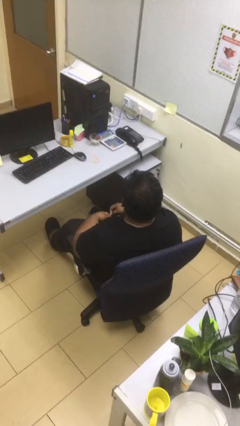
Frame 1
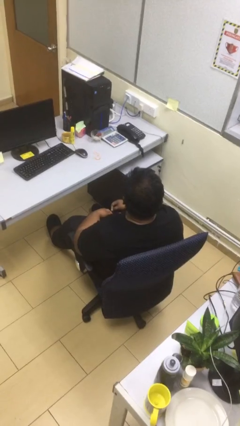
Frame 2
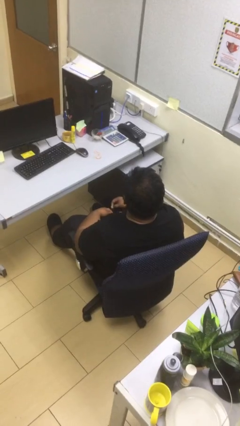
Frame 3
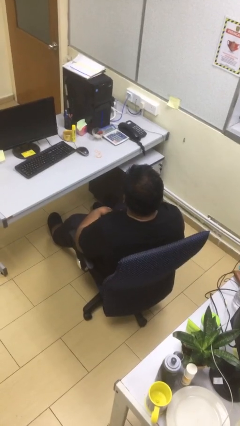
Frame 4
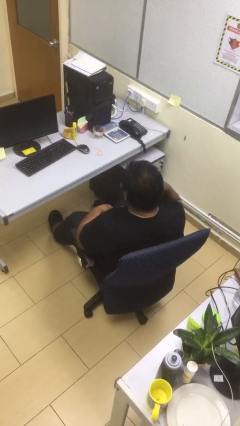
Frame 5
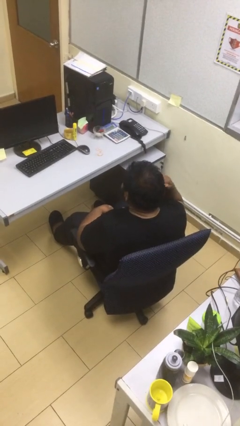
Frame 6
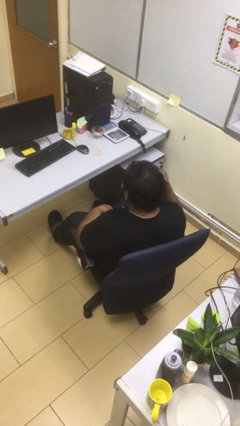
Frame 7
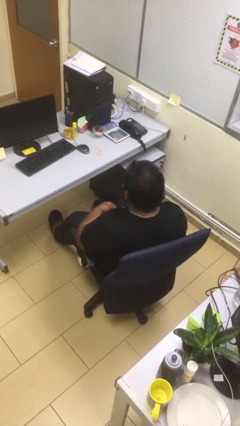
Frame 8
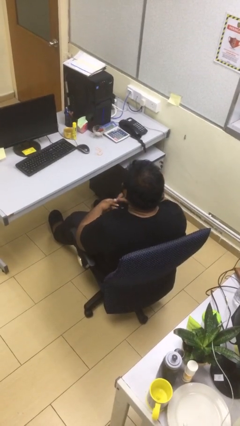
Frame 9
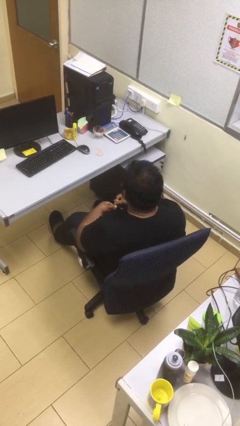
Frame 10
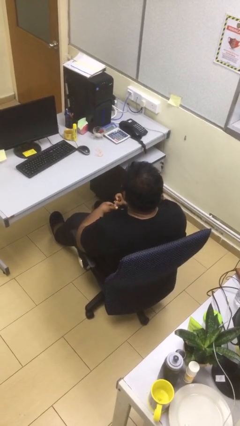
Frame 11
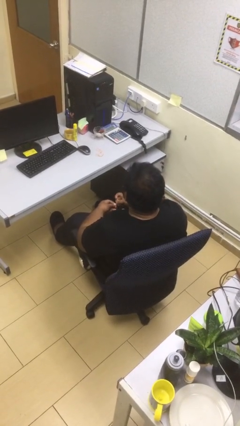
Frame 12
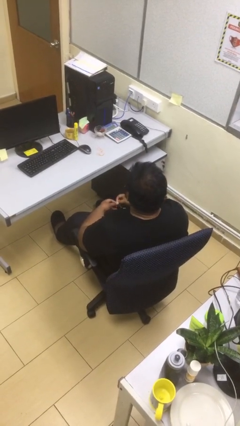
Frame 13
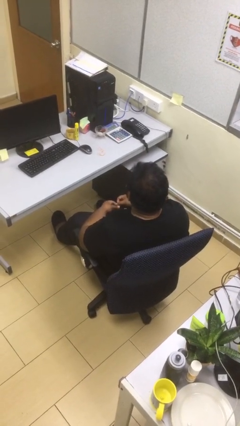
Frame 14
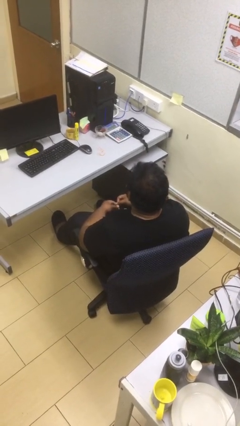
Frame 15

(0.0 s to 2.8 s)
person takes off earrings

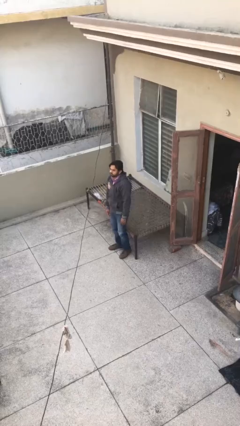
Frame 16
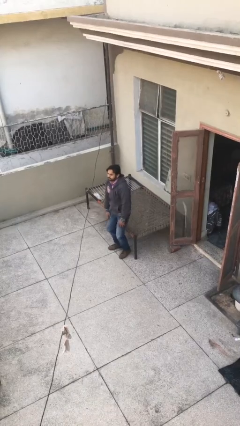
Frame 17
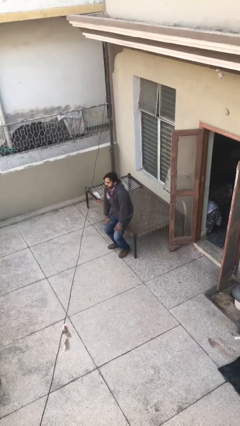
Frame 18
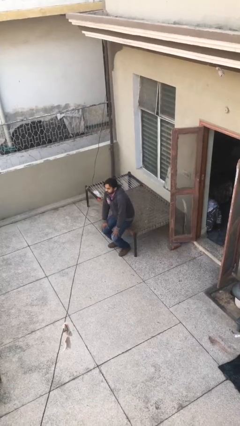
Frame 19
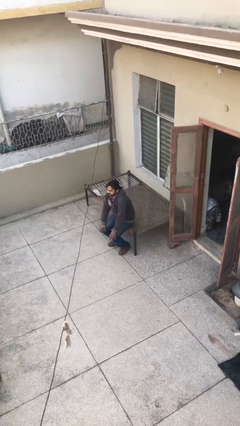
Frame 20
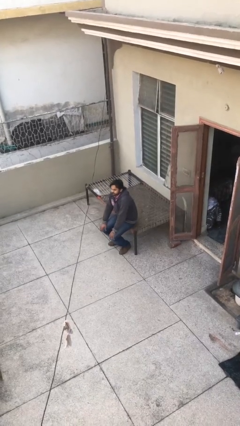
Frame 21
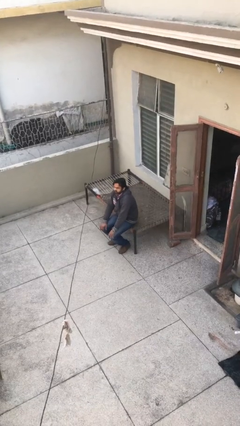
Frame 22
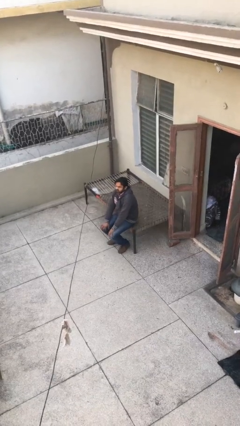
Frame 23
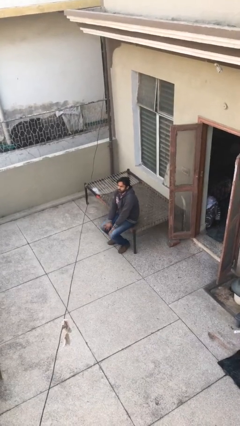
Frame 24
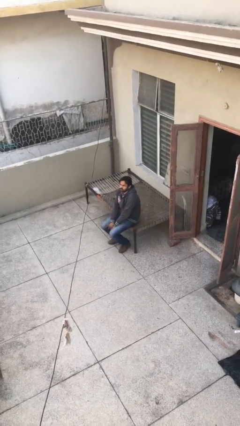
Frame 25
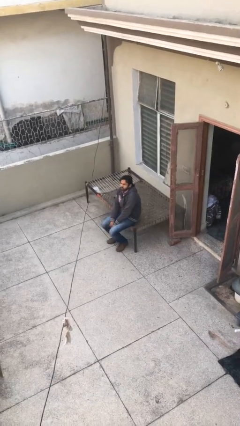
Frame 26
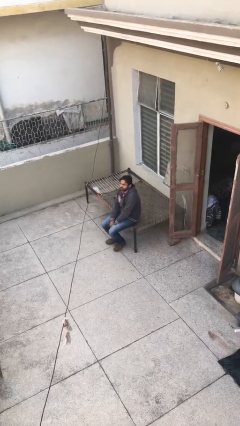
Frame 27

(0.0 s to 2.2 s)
person sits down

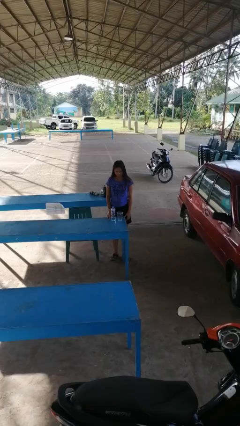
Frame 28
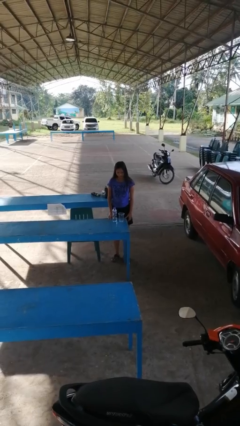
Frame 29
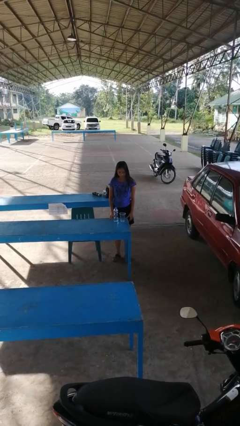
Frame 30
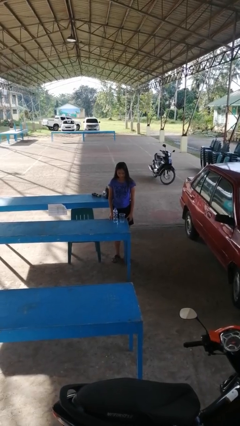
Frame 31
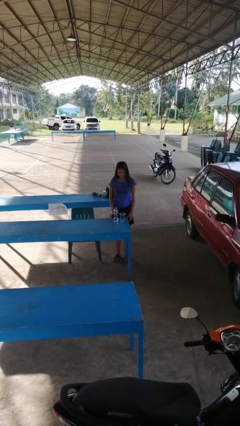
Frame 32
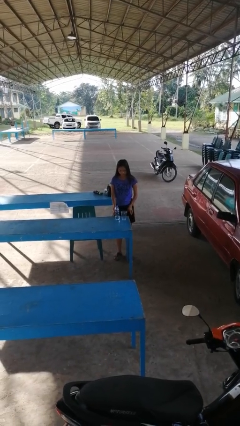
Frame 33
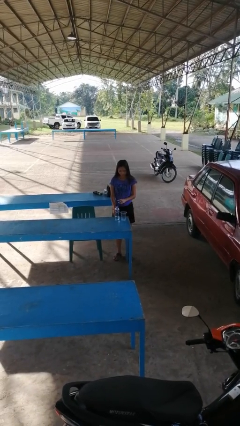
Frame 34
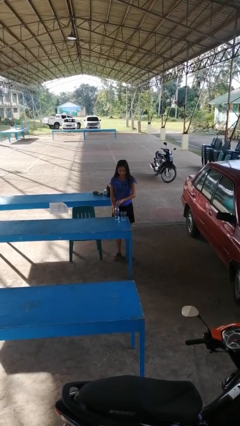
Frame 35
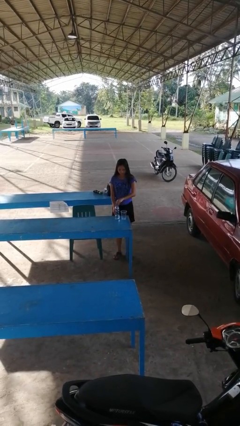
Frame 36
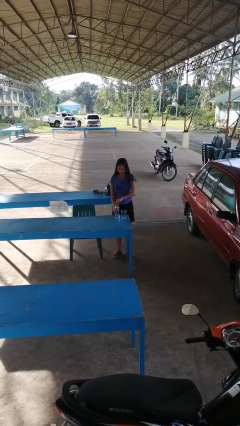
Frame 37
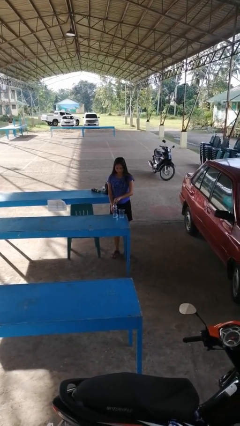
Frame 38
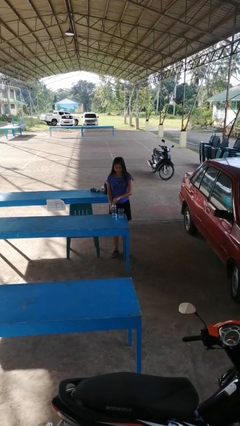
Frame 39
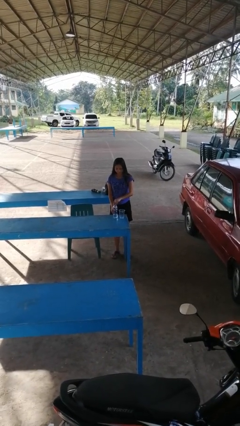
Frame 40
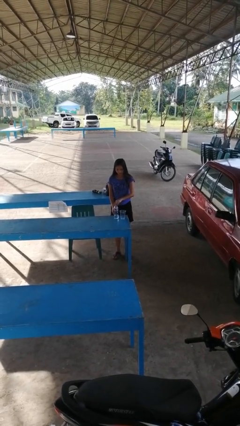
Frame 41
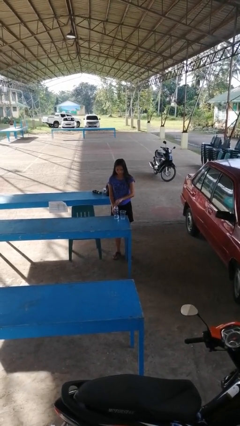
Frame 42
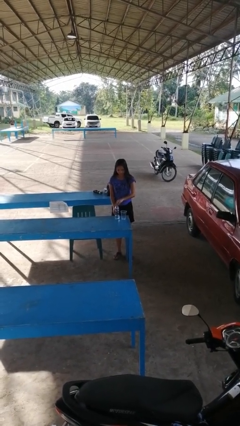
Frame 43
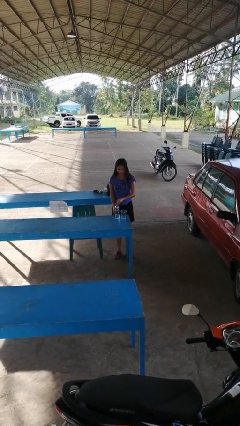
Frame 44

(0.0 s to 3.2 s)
person unscrews lid from bottle

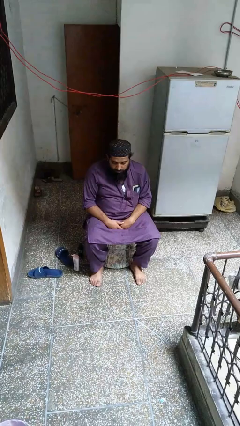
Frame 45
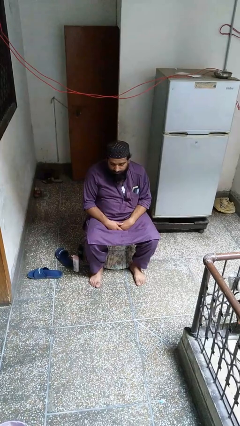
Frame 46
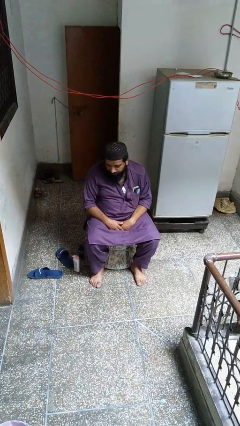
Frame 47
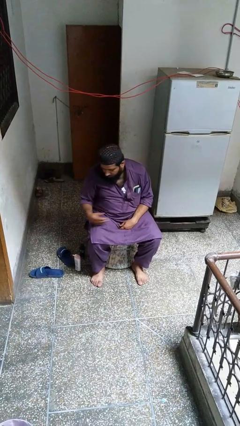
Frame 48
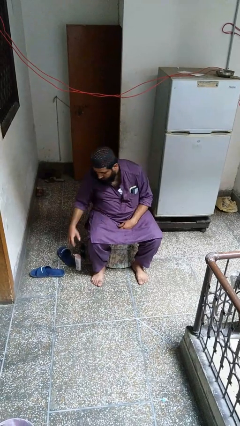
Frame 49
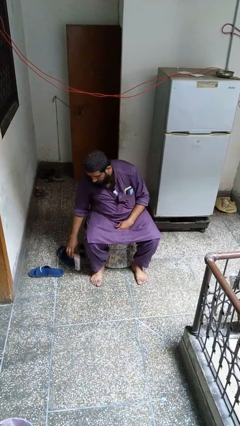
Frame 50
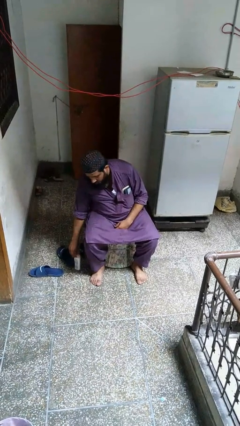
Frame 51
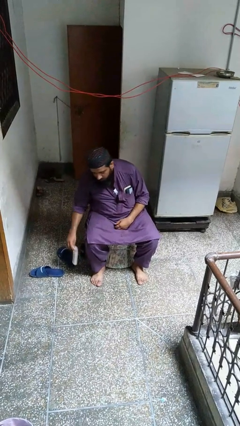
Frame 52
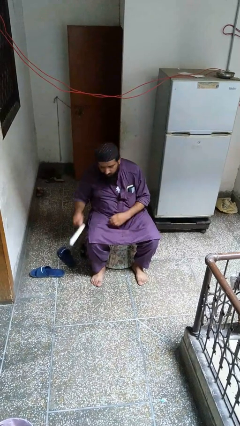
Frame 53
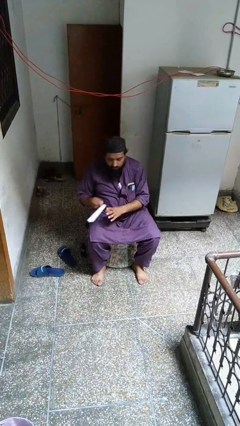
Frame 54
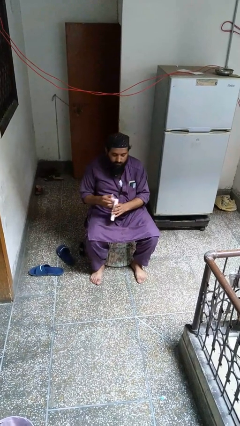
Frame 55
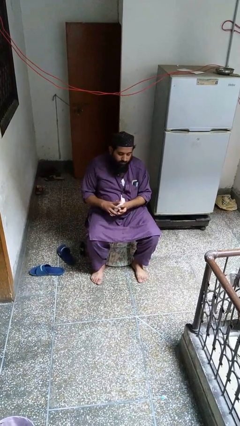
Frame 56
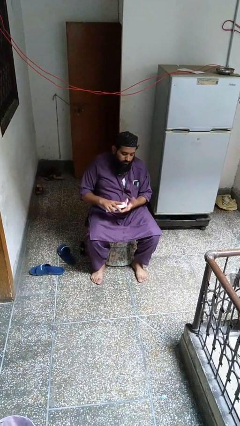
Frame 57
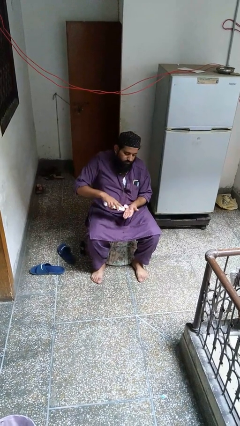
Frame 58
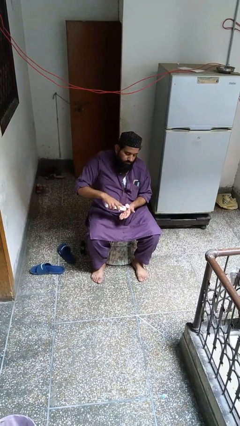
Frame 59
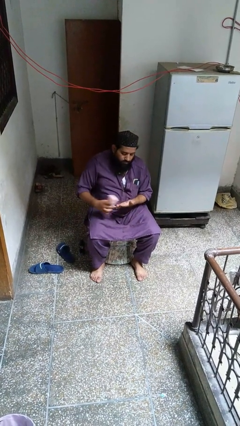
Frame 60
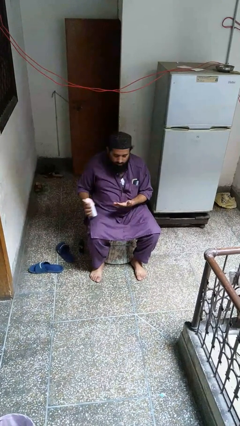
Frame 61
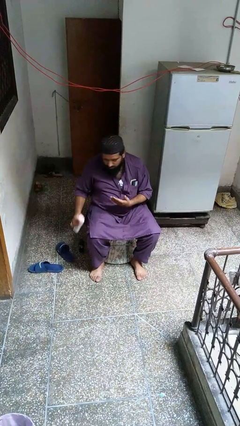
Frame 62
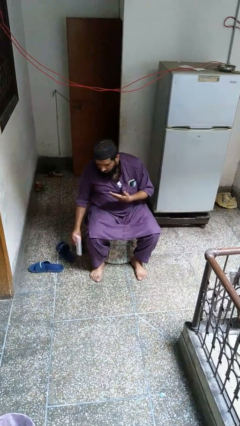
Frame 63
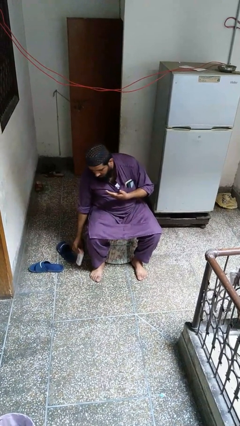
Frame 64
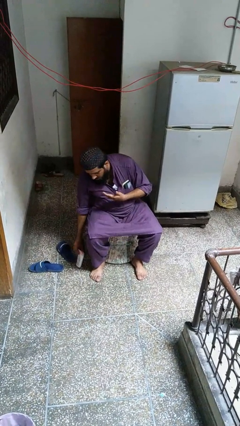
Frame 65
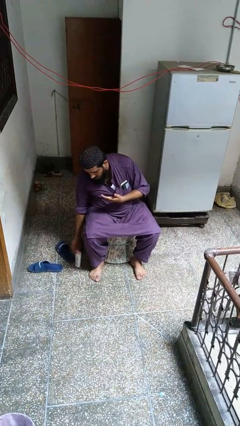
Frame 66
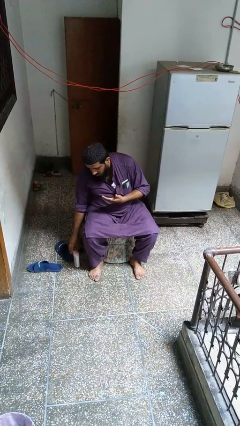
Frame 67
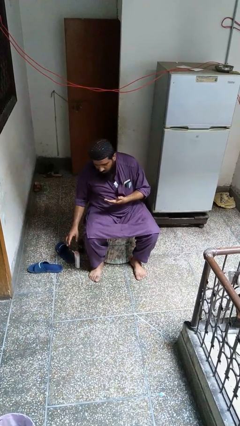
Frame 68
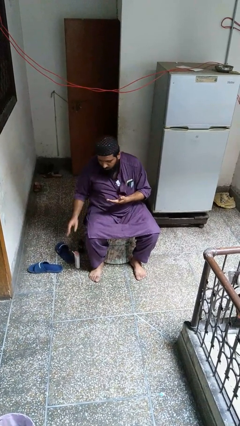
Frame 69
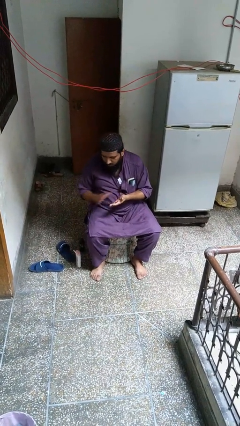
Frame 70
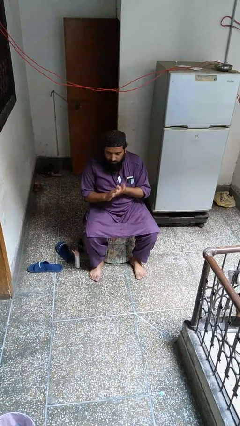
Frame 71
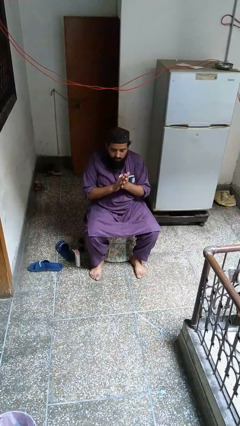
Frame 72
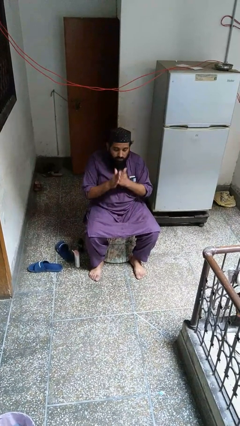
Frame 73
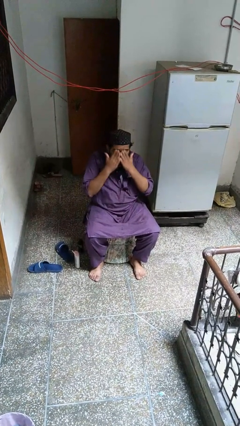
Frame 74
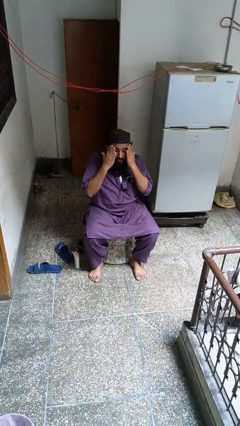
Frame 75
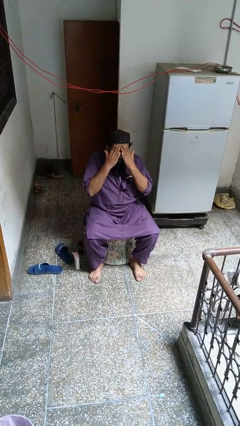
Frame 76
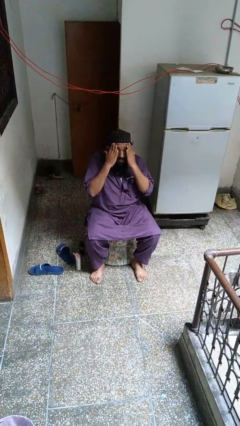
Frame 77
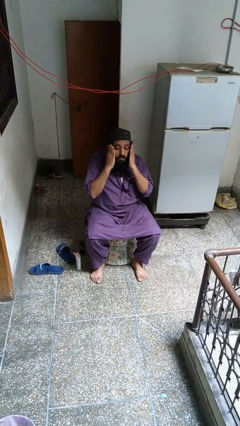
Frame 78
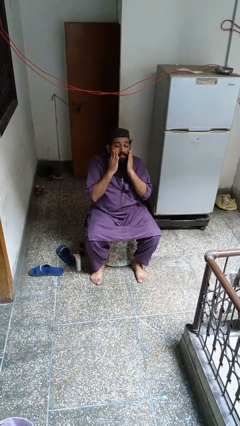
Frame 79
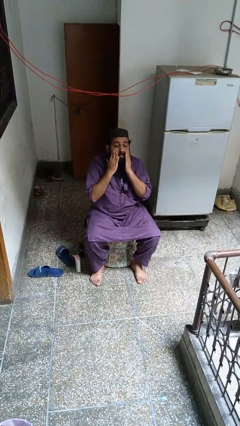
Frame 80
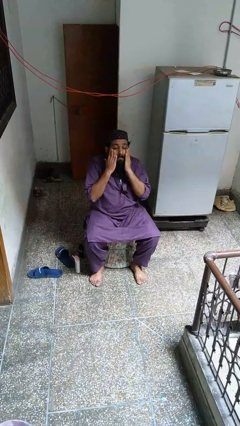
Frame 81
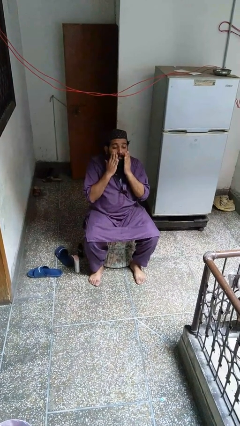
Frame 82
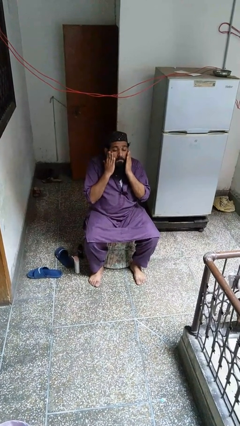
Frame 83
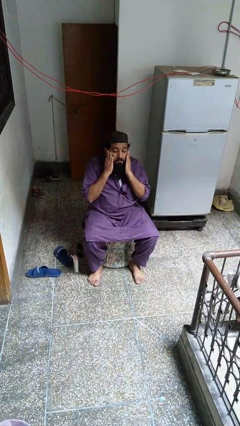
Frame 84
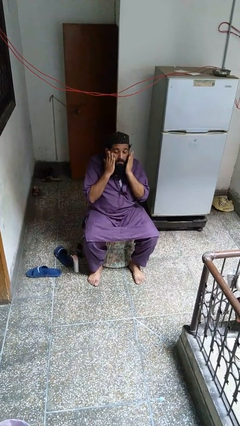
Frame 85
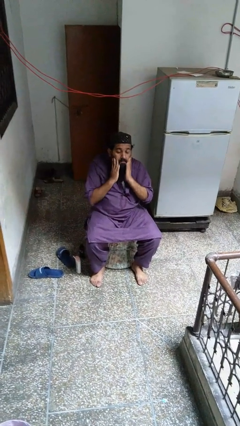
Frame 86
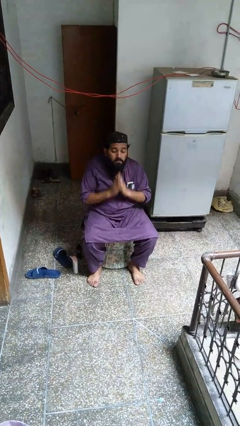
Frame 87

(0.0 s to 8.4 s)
person applies facial moisturizer

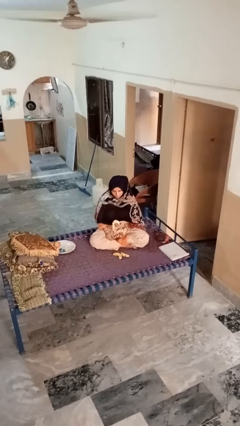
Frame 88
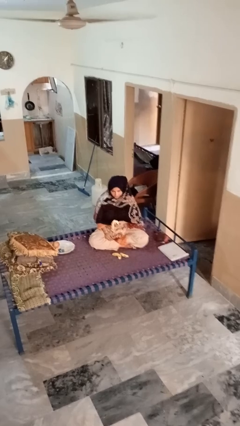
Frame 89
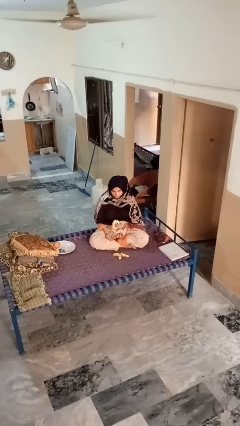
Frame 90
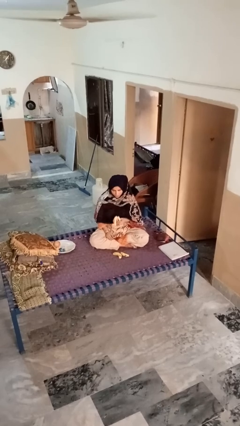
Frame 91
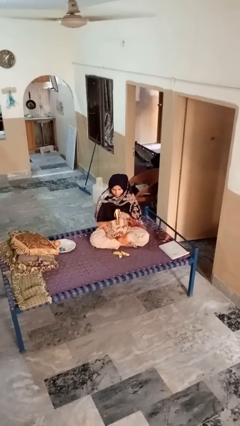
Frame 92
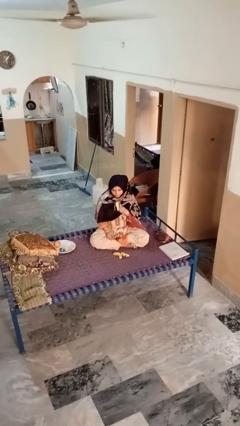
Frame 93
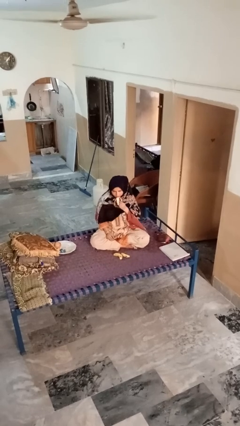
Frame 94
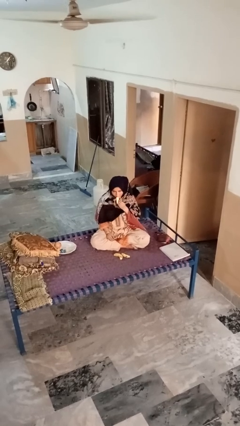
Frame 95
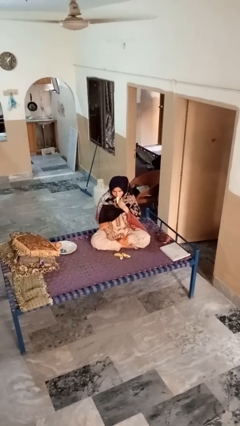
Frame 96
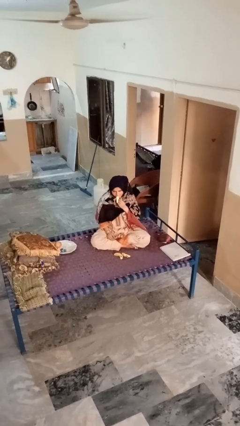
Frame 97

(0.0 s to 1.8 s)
person eats banana
